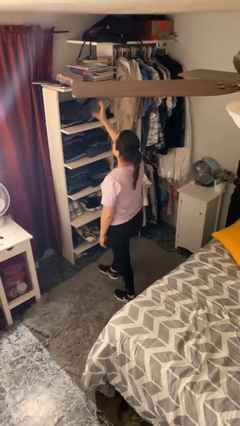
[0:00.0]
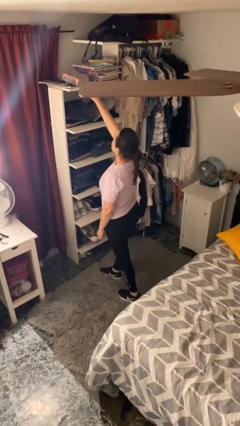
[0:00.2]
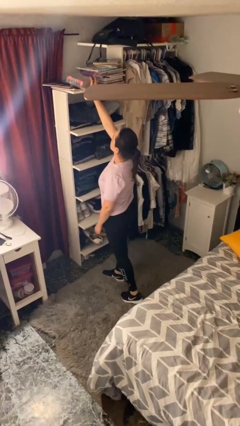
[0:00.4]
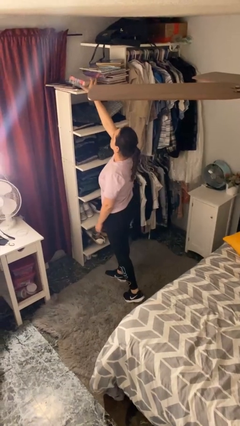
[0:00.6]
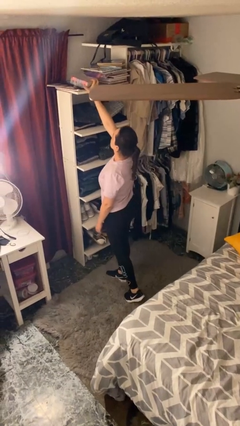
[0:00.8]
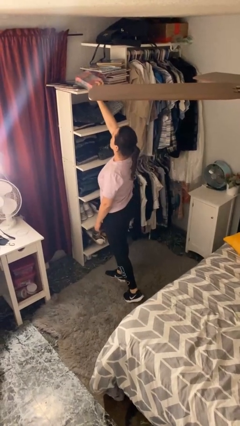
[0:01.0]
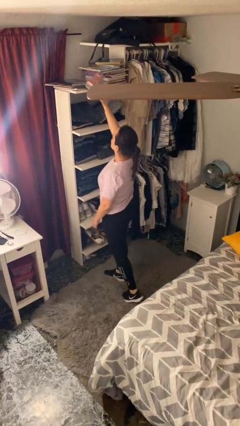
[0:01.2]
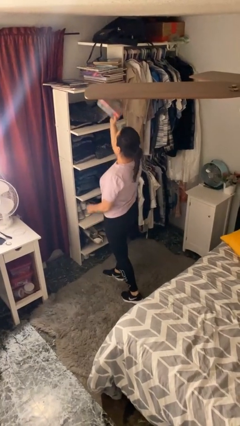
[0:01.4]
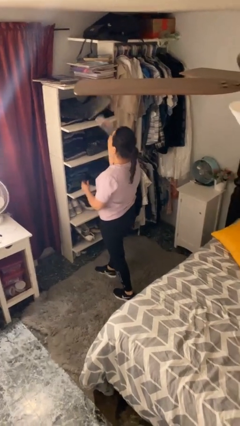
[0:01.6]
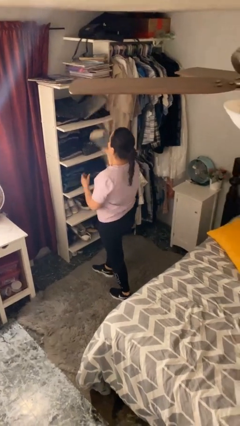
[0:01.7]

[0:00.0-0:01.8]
person picks up object from shelf

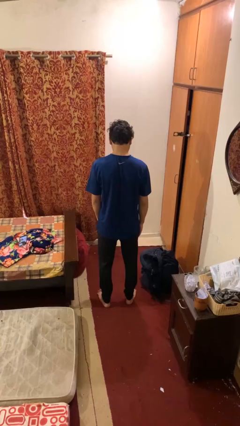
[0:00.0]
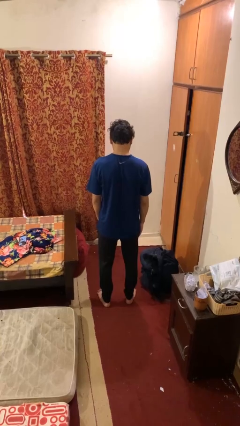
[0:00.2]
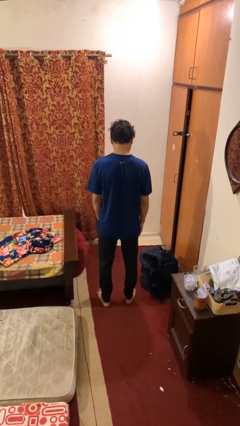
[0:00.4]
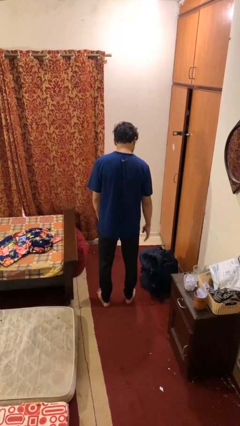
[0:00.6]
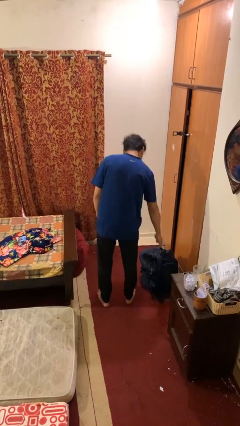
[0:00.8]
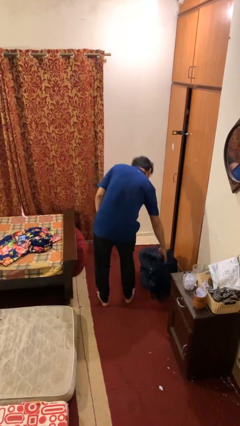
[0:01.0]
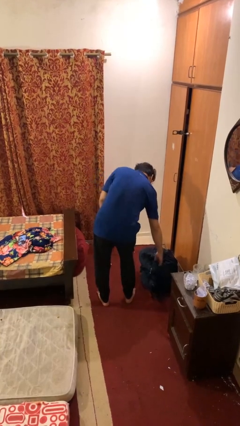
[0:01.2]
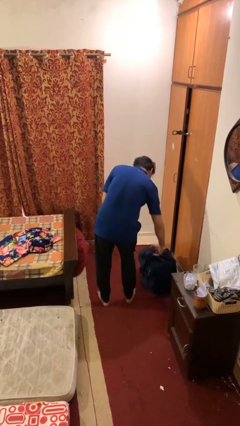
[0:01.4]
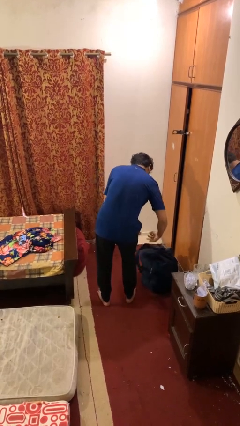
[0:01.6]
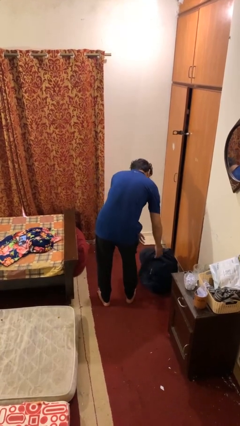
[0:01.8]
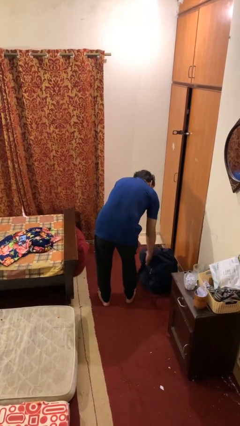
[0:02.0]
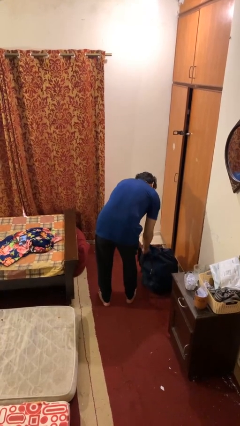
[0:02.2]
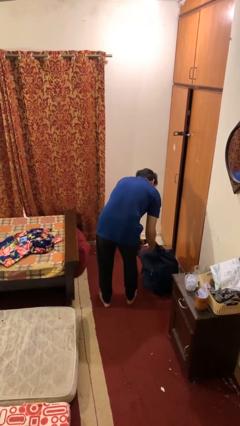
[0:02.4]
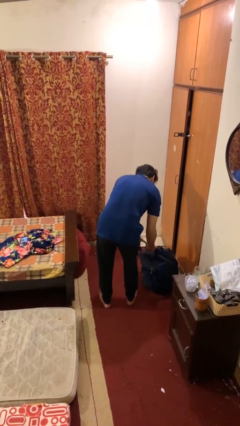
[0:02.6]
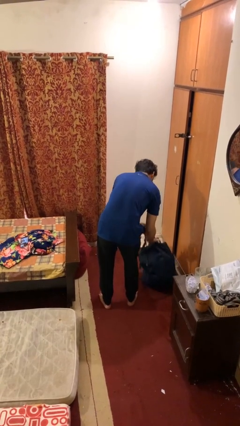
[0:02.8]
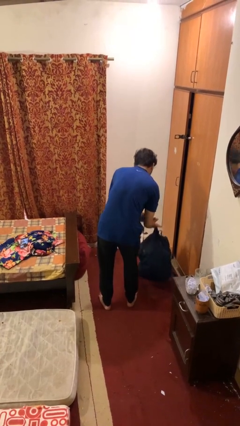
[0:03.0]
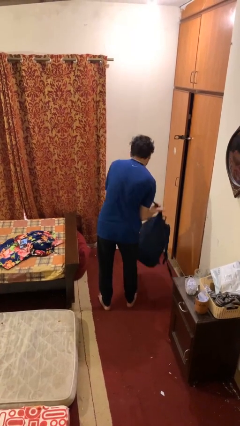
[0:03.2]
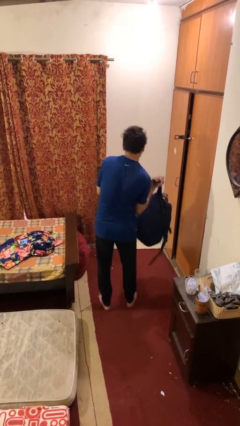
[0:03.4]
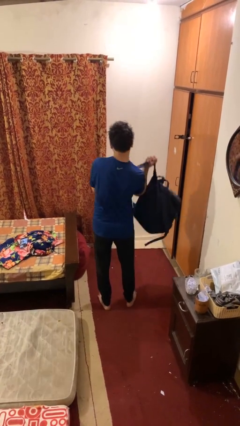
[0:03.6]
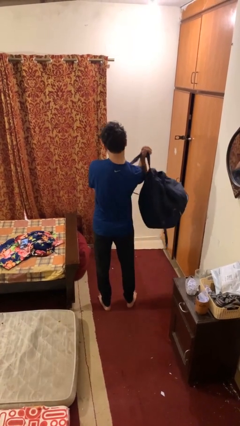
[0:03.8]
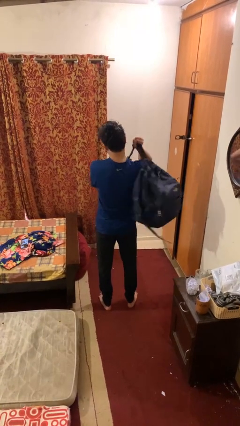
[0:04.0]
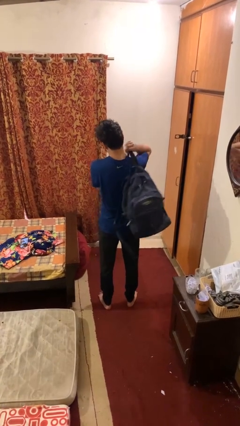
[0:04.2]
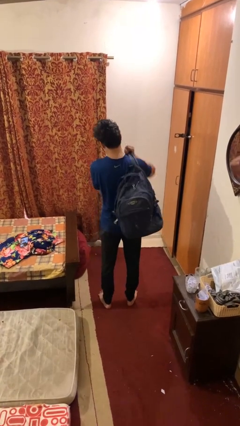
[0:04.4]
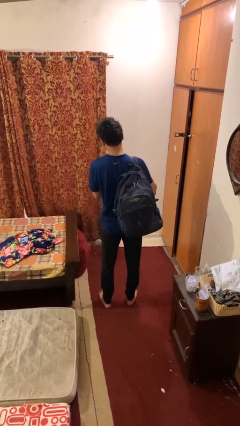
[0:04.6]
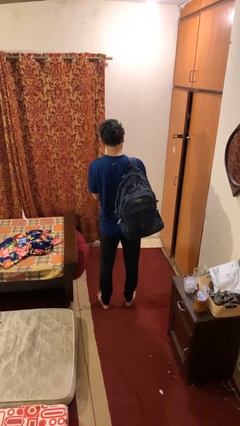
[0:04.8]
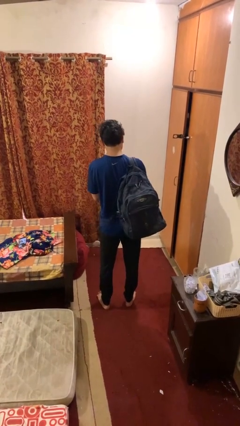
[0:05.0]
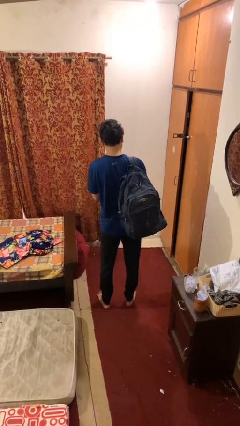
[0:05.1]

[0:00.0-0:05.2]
person puts on backpack

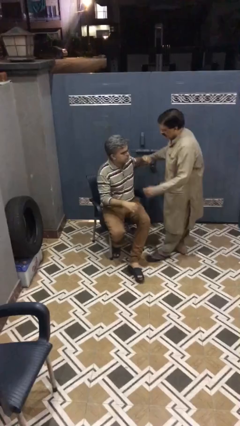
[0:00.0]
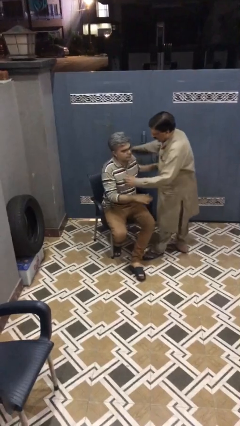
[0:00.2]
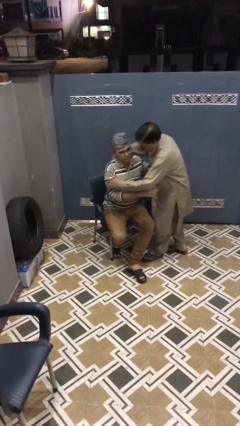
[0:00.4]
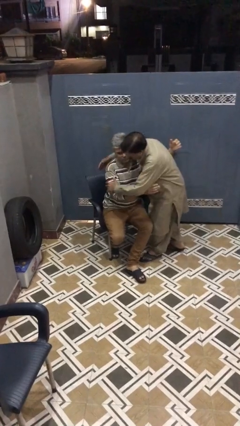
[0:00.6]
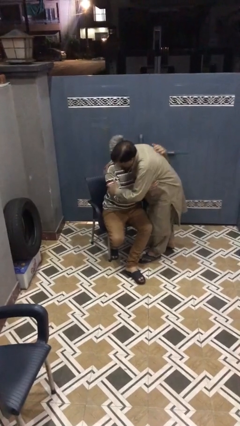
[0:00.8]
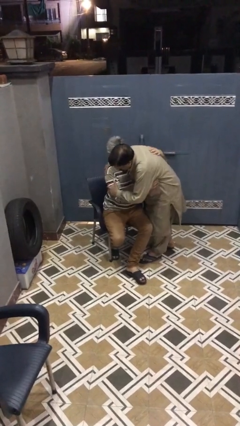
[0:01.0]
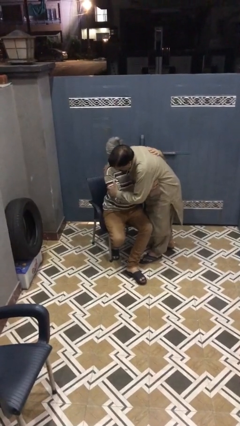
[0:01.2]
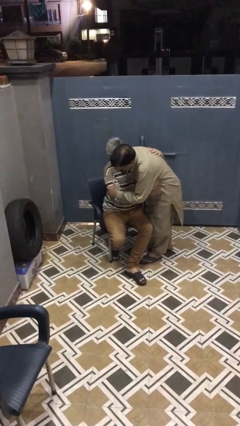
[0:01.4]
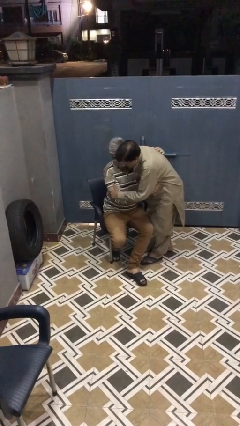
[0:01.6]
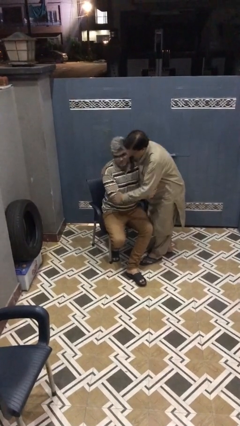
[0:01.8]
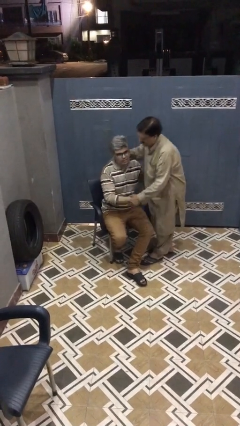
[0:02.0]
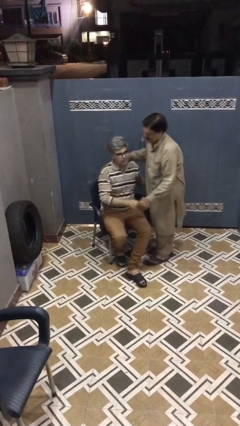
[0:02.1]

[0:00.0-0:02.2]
person embraces person

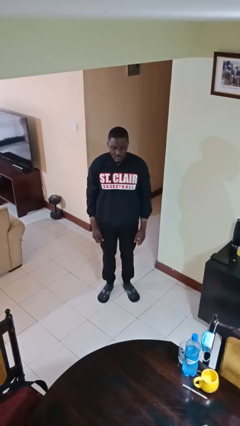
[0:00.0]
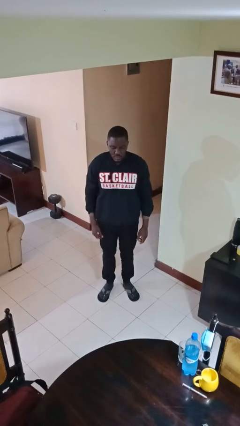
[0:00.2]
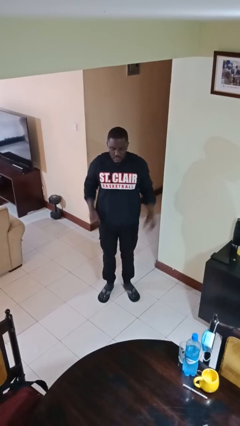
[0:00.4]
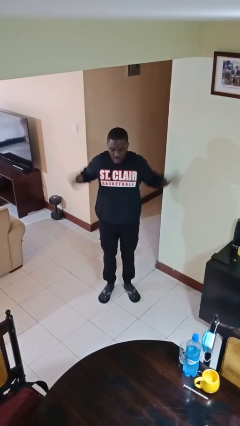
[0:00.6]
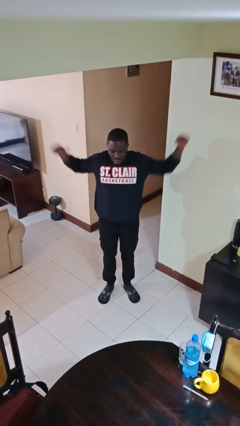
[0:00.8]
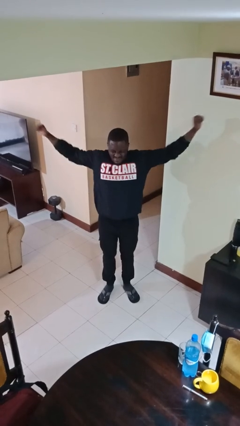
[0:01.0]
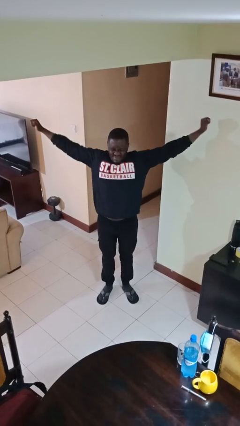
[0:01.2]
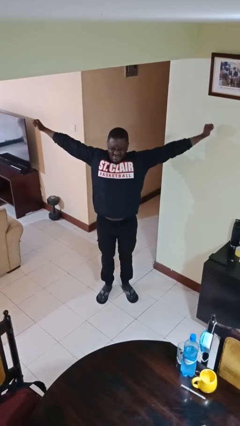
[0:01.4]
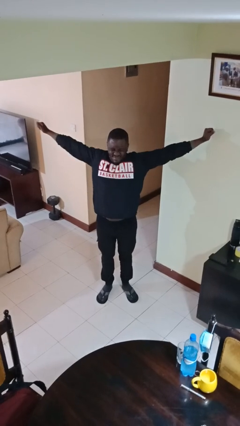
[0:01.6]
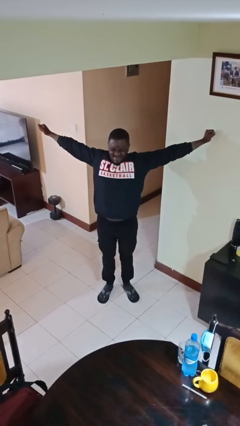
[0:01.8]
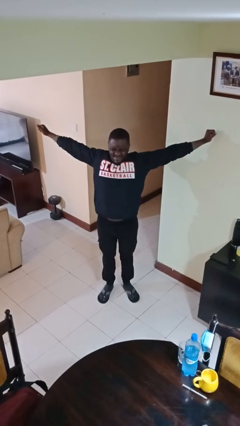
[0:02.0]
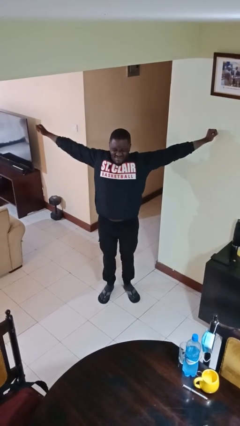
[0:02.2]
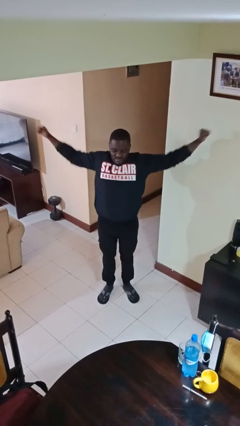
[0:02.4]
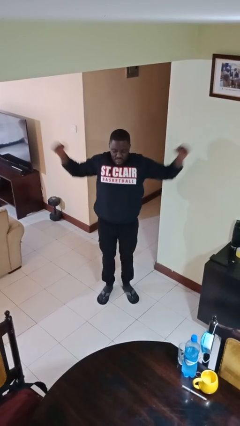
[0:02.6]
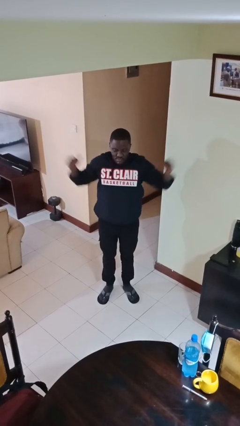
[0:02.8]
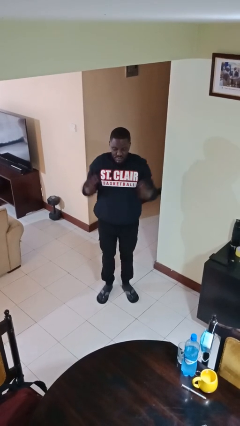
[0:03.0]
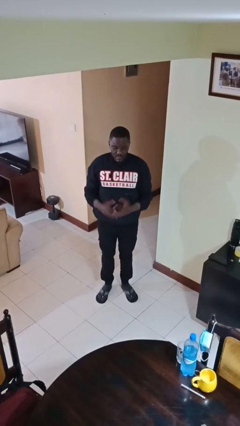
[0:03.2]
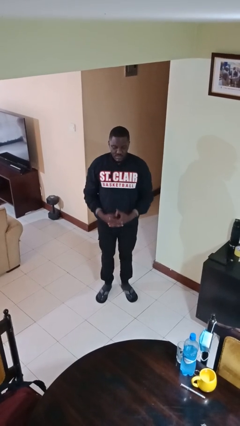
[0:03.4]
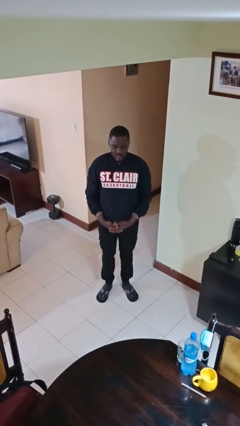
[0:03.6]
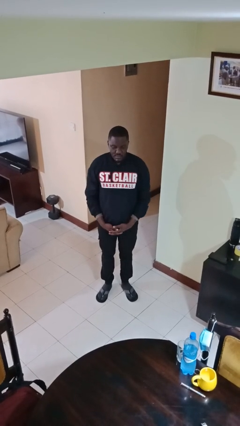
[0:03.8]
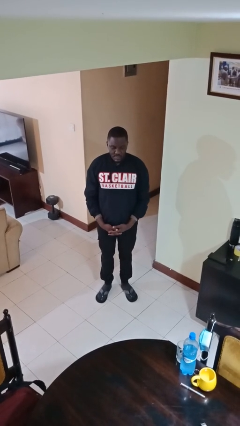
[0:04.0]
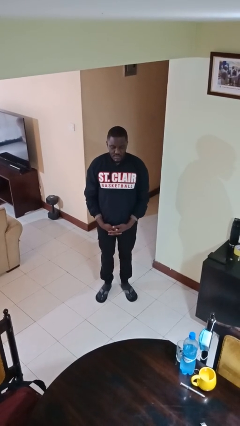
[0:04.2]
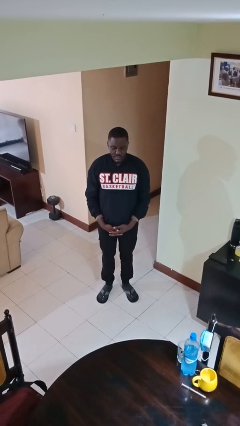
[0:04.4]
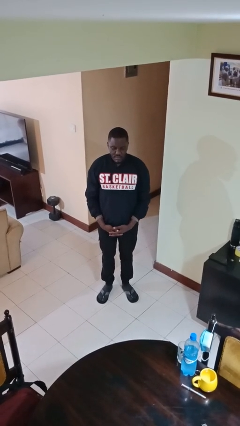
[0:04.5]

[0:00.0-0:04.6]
person stretches arms to side

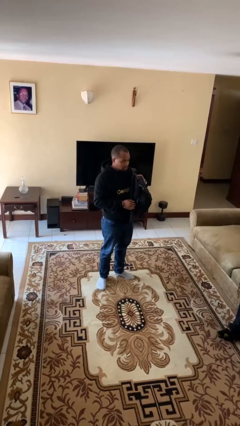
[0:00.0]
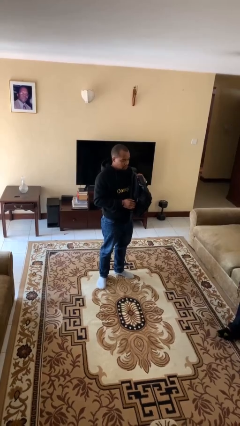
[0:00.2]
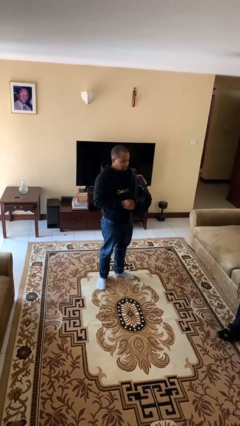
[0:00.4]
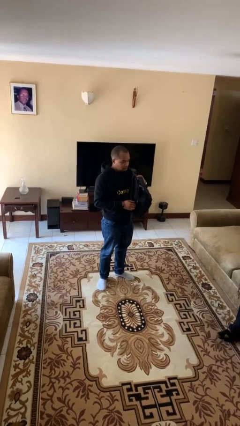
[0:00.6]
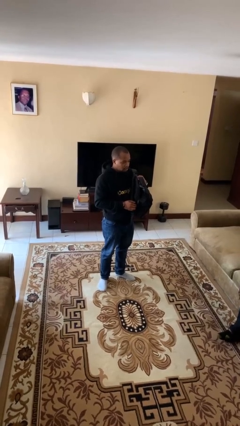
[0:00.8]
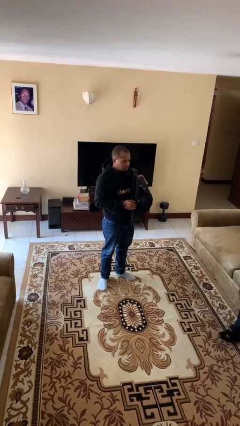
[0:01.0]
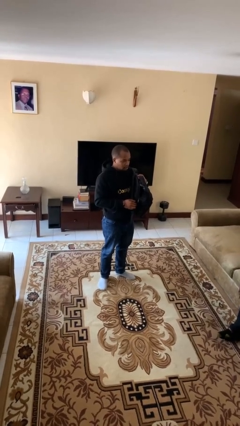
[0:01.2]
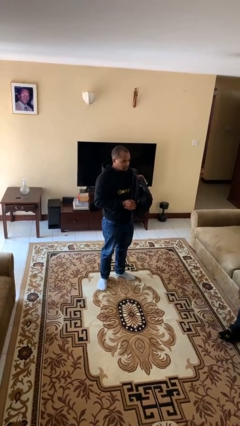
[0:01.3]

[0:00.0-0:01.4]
person searches in backpack

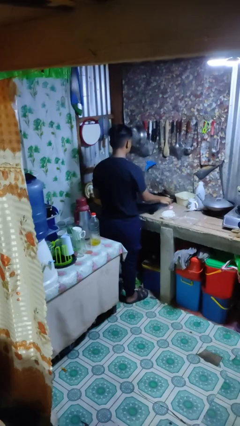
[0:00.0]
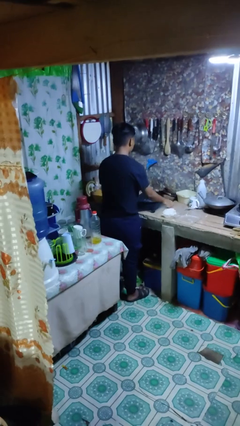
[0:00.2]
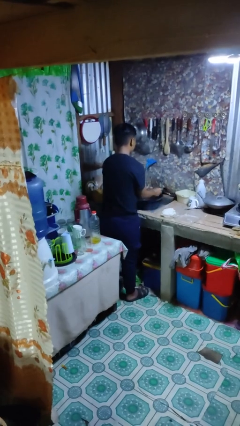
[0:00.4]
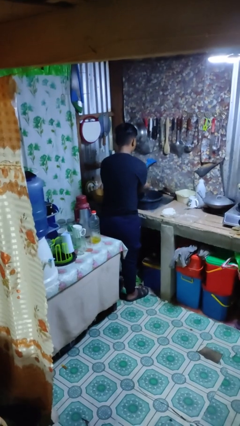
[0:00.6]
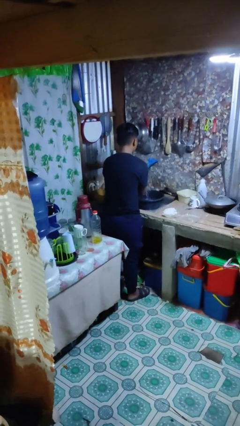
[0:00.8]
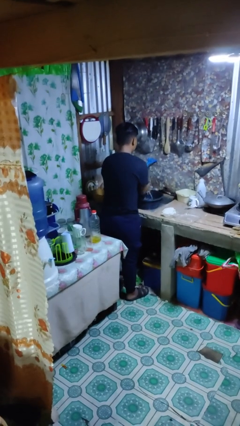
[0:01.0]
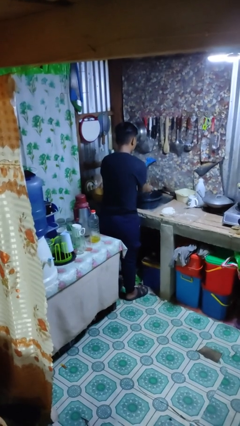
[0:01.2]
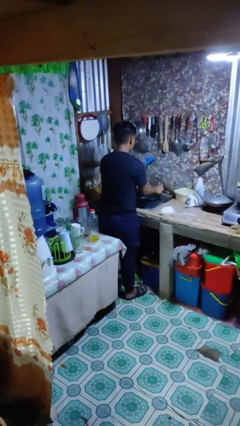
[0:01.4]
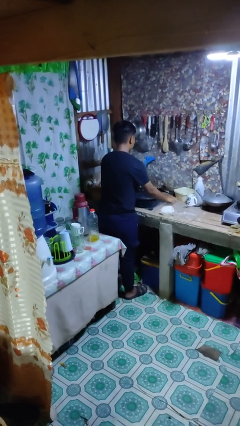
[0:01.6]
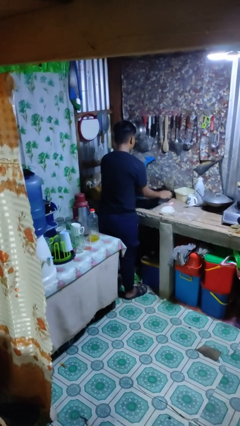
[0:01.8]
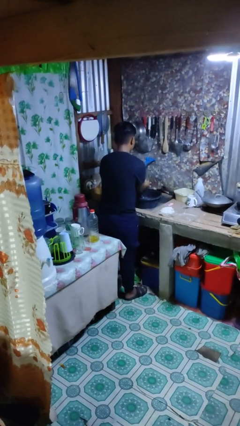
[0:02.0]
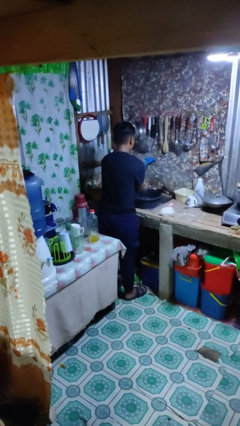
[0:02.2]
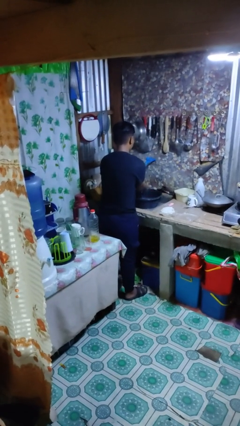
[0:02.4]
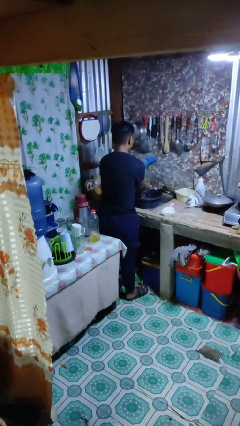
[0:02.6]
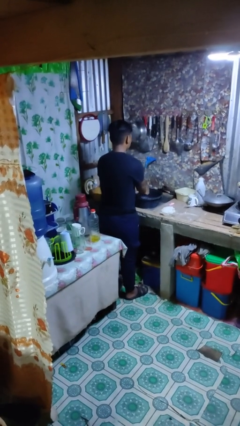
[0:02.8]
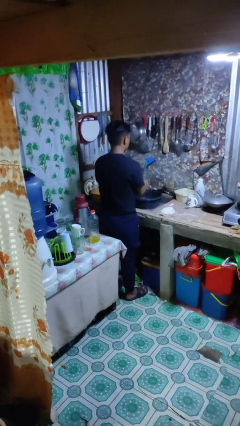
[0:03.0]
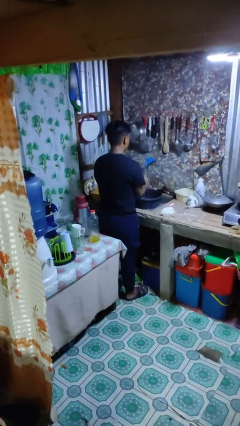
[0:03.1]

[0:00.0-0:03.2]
person washes hands
